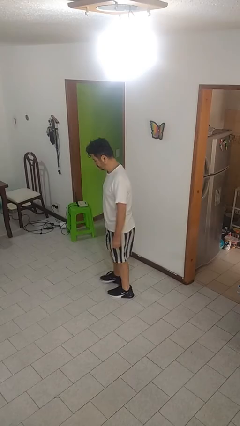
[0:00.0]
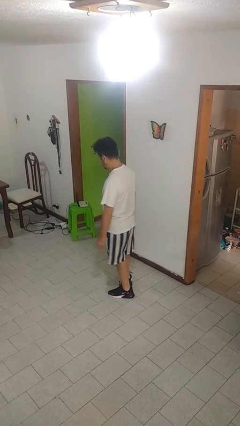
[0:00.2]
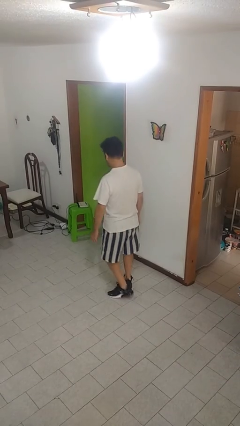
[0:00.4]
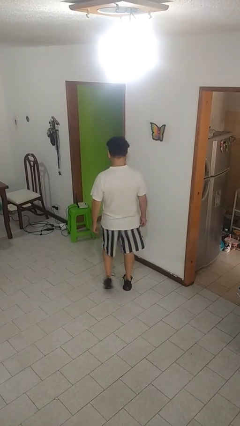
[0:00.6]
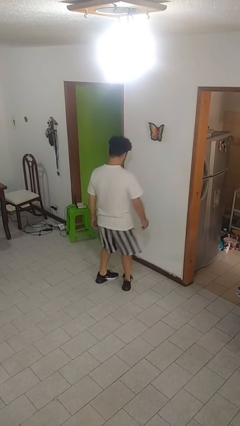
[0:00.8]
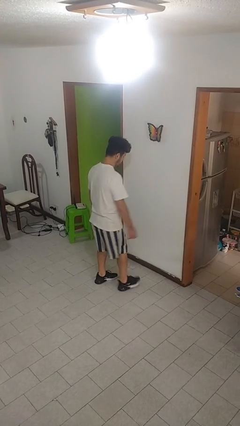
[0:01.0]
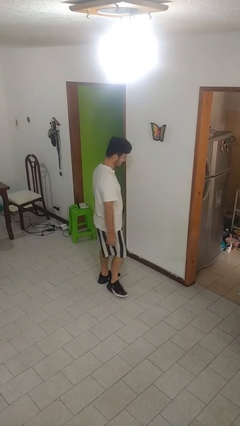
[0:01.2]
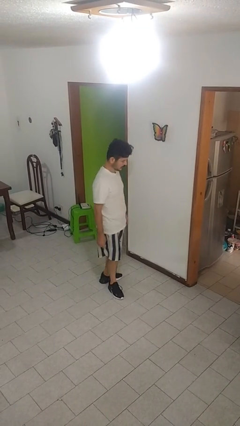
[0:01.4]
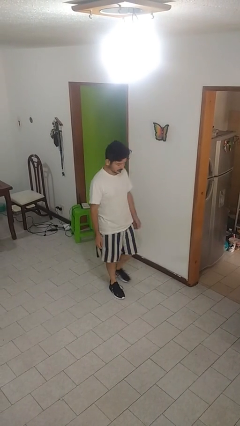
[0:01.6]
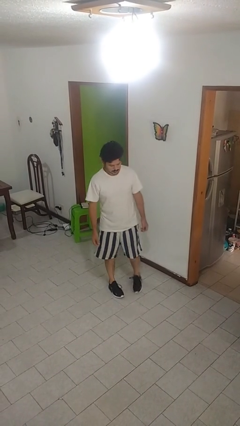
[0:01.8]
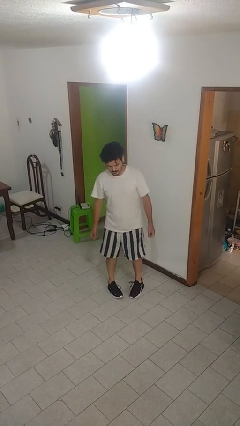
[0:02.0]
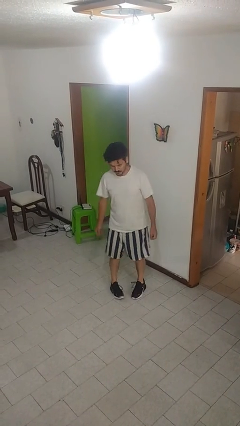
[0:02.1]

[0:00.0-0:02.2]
person twirls

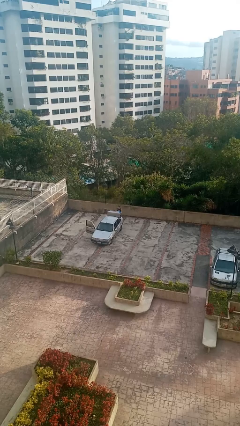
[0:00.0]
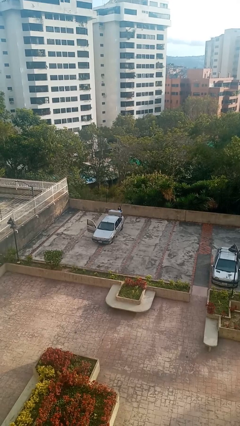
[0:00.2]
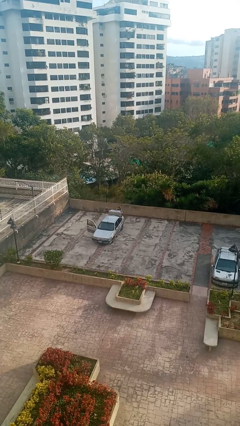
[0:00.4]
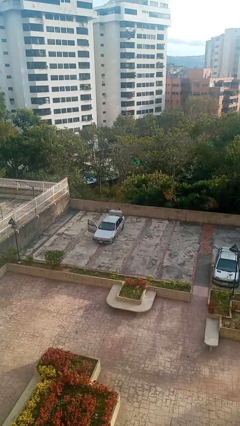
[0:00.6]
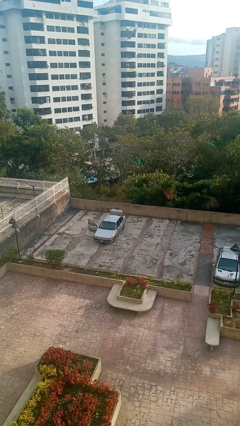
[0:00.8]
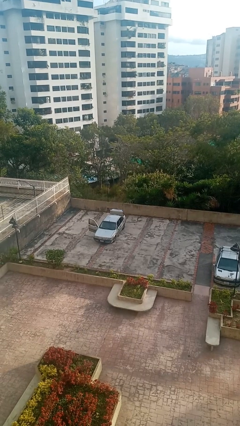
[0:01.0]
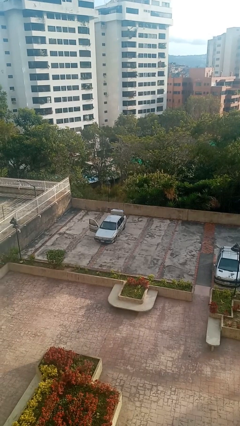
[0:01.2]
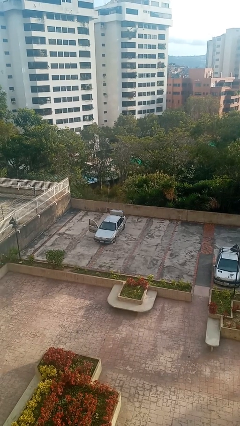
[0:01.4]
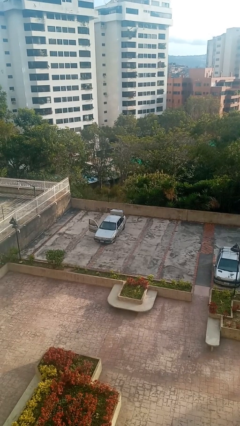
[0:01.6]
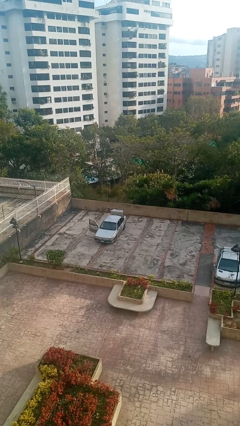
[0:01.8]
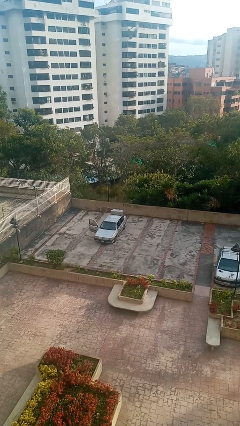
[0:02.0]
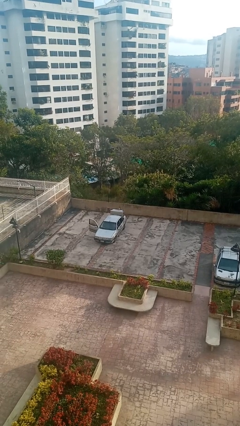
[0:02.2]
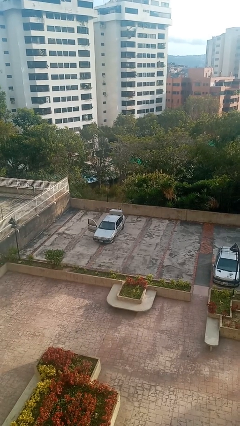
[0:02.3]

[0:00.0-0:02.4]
person loads car

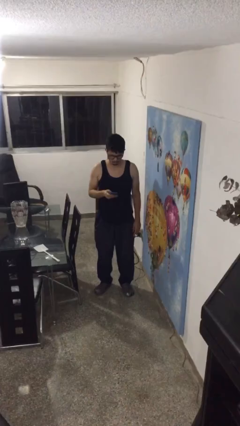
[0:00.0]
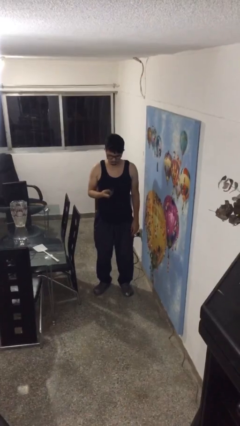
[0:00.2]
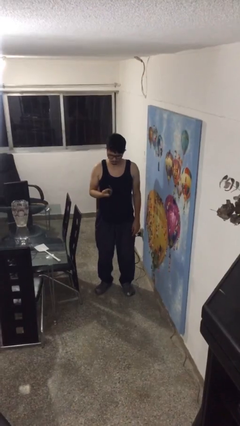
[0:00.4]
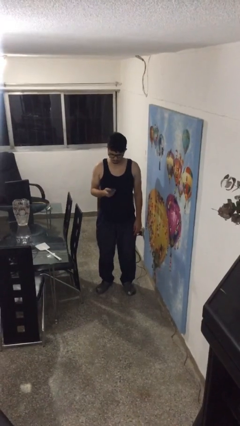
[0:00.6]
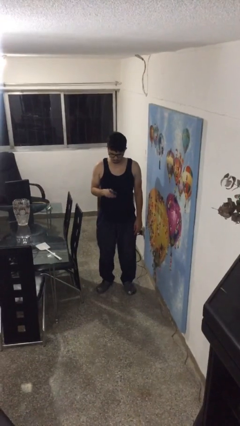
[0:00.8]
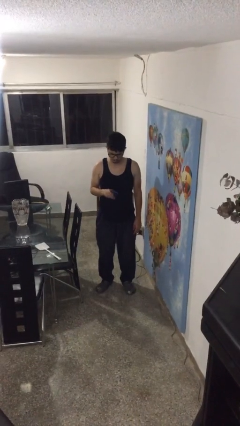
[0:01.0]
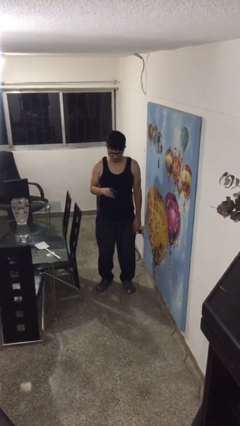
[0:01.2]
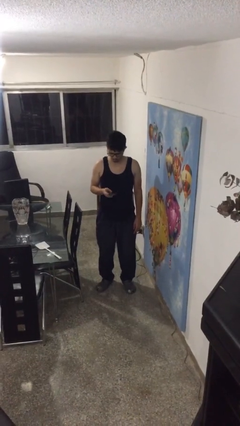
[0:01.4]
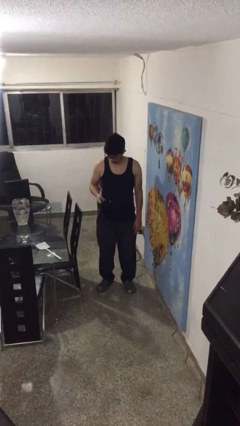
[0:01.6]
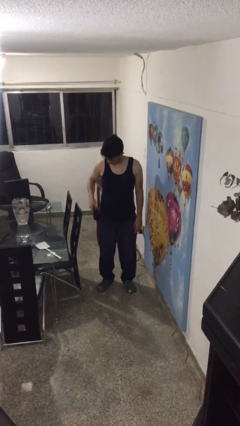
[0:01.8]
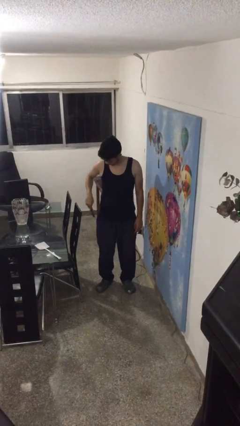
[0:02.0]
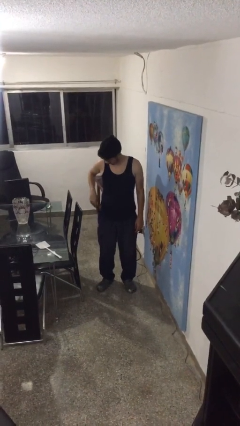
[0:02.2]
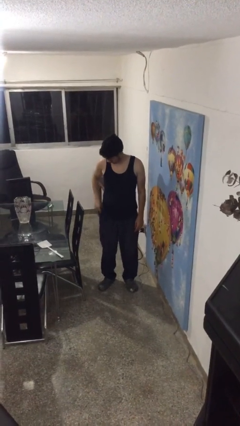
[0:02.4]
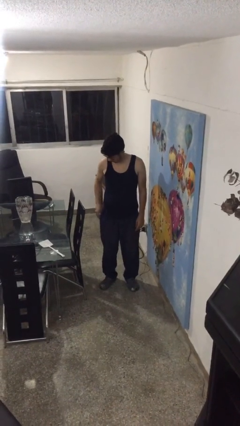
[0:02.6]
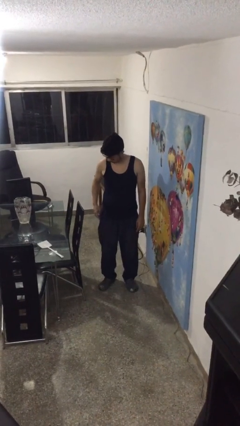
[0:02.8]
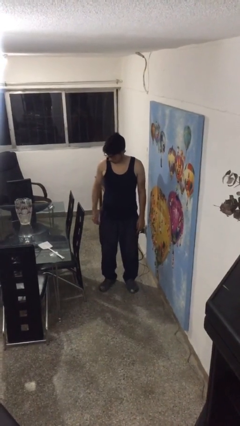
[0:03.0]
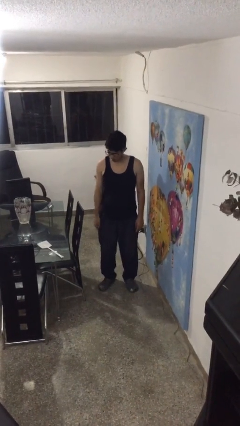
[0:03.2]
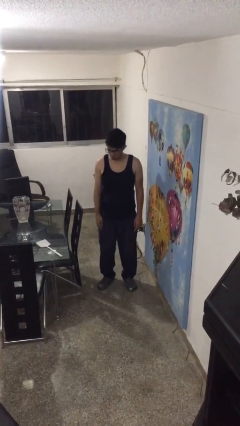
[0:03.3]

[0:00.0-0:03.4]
person puts phone into pocket

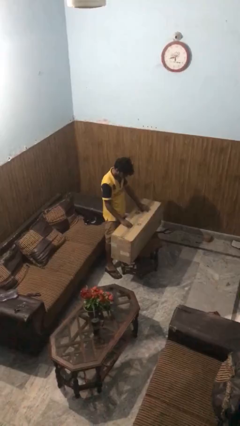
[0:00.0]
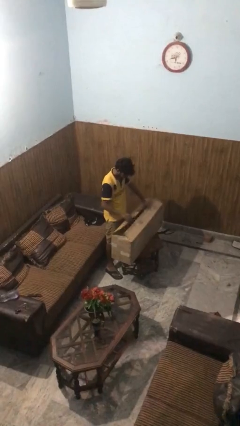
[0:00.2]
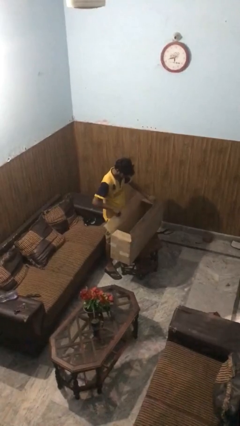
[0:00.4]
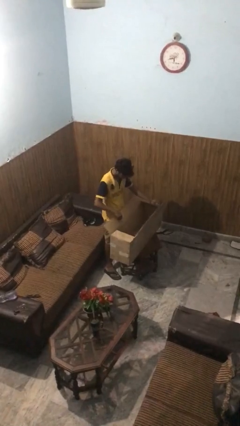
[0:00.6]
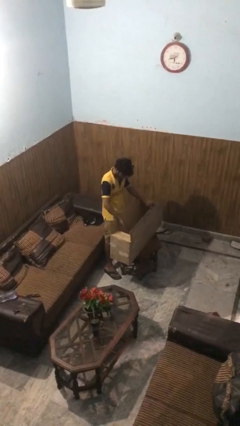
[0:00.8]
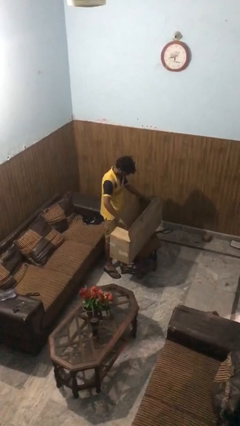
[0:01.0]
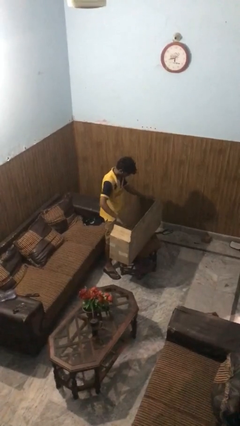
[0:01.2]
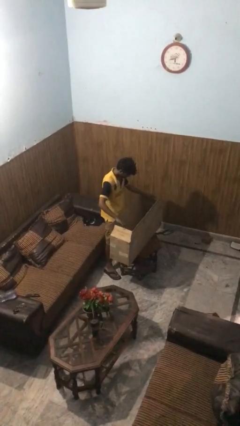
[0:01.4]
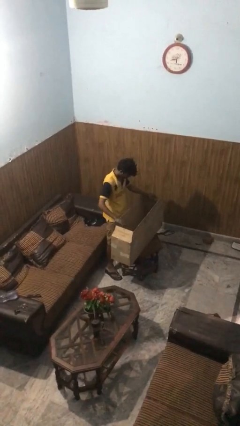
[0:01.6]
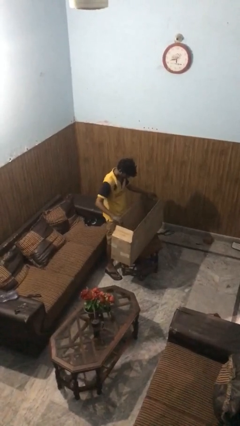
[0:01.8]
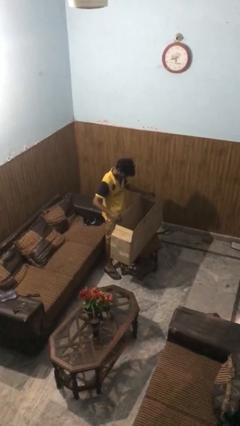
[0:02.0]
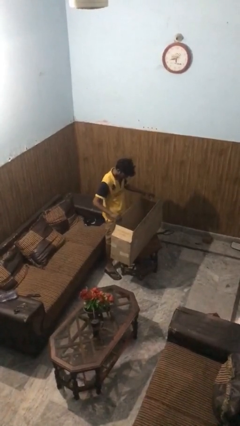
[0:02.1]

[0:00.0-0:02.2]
person opens box

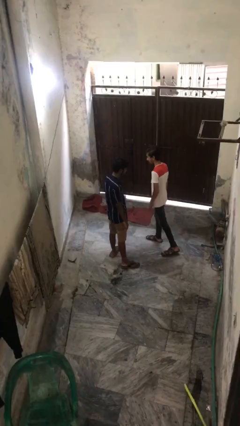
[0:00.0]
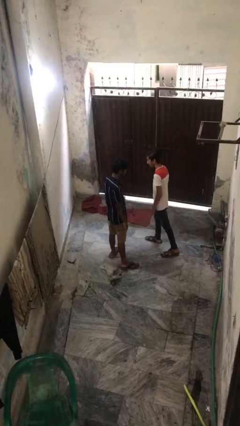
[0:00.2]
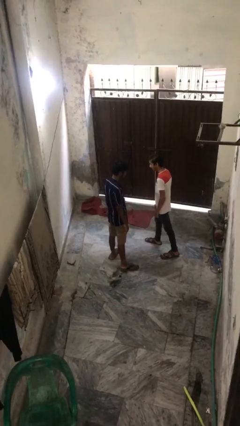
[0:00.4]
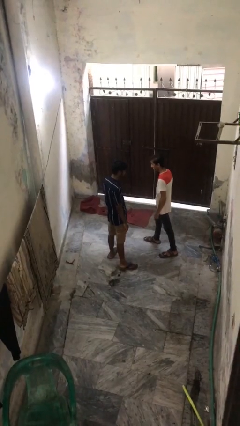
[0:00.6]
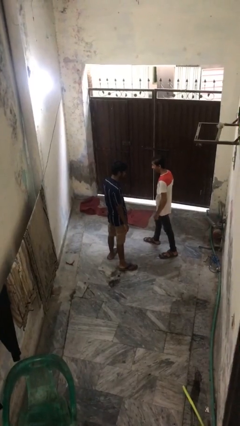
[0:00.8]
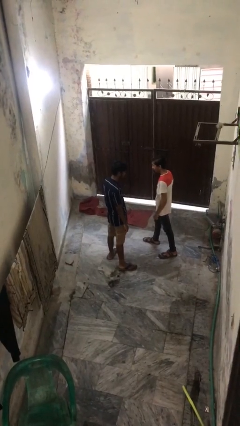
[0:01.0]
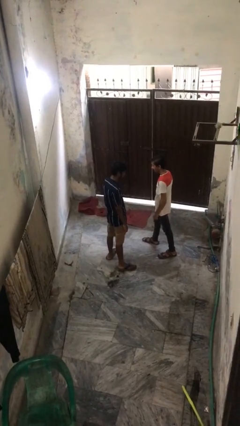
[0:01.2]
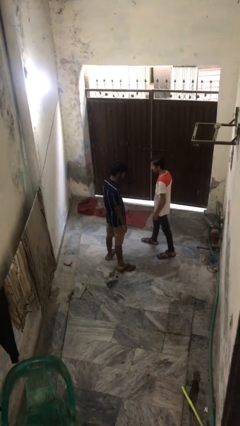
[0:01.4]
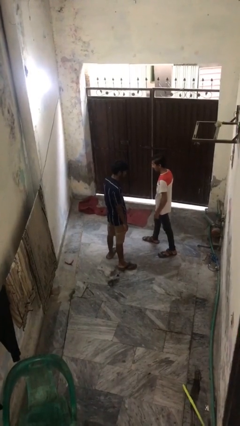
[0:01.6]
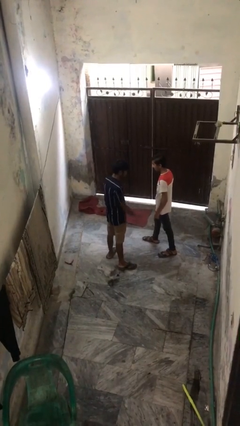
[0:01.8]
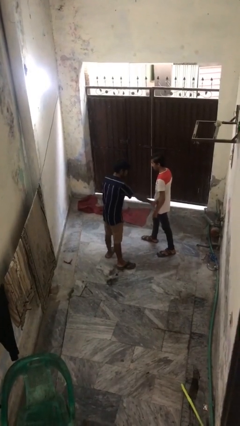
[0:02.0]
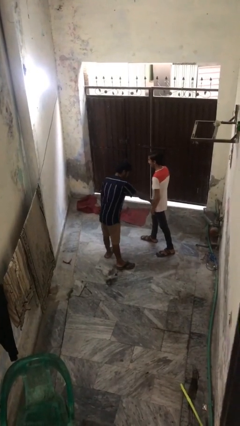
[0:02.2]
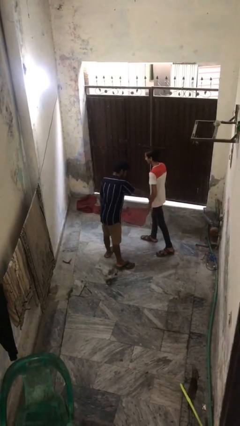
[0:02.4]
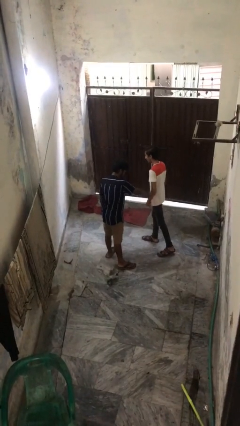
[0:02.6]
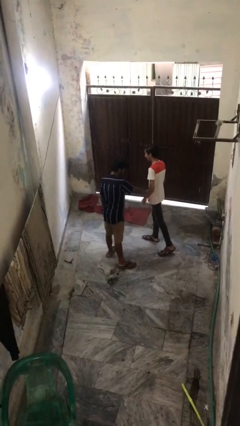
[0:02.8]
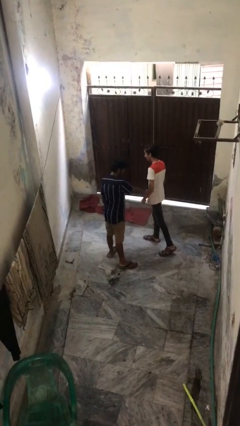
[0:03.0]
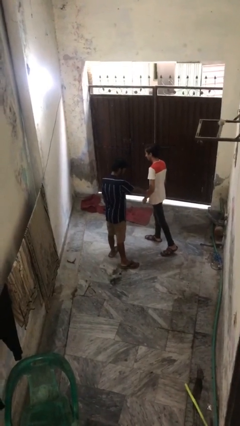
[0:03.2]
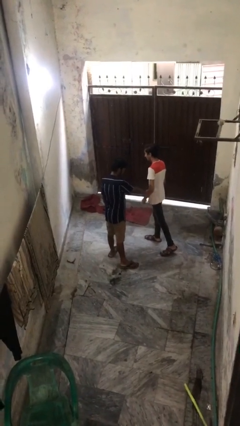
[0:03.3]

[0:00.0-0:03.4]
person grabs person by forearm

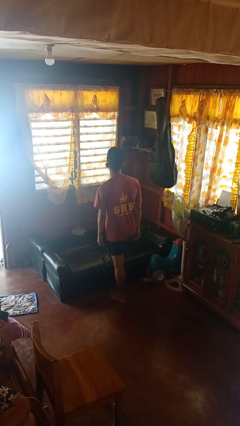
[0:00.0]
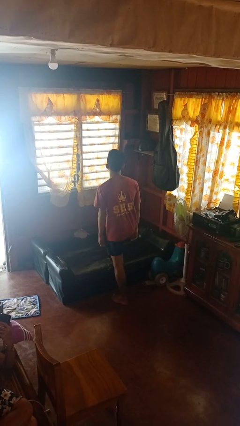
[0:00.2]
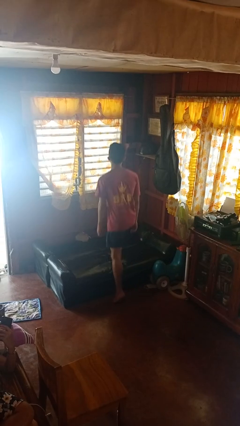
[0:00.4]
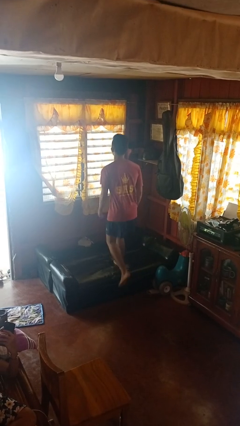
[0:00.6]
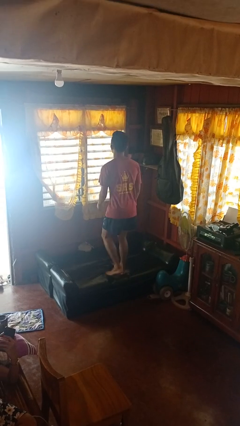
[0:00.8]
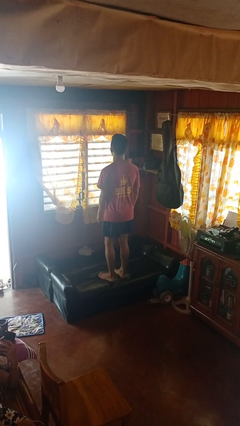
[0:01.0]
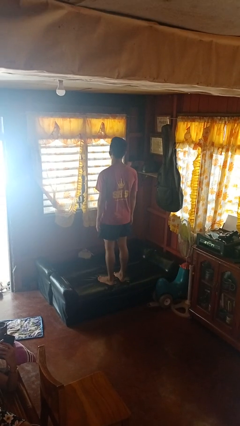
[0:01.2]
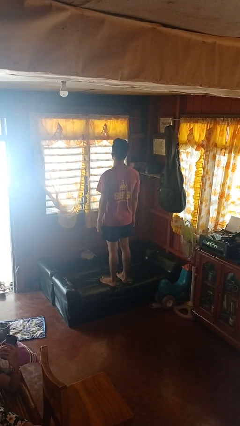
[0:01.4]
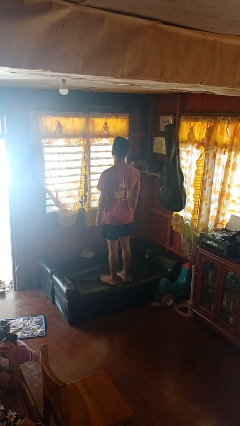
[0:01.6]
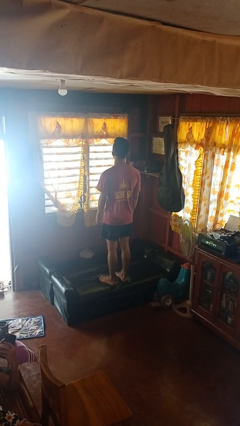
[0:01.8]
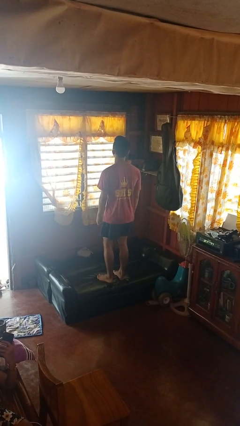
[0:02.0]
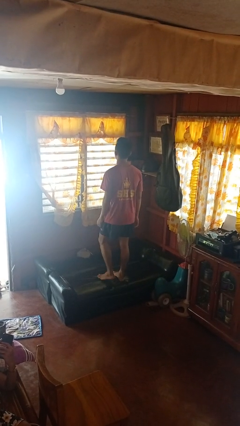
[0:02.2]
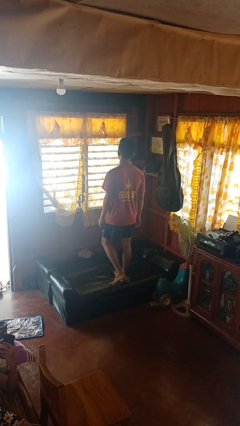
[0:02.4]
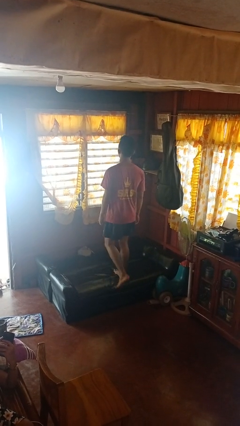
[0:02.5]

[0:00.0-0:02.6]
person climbs on couch

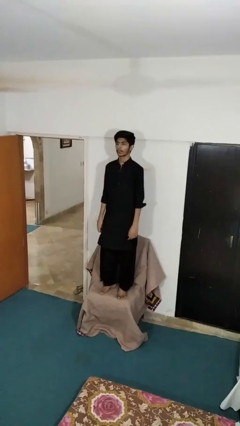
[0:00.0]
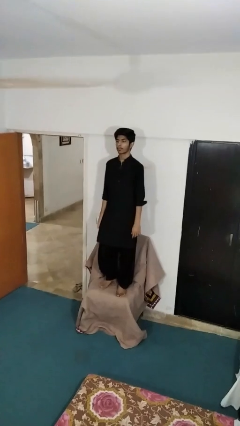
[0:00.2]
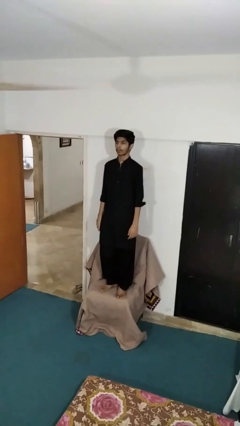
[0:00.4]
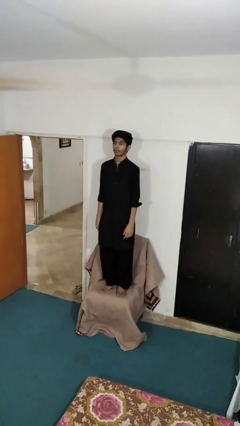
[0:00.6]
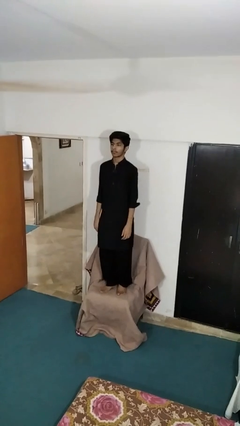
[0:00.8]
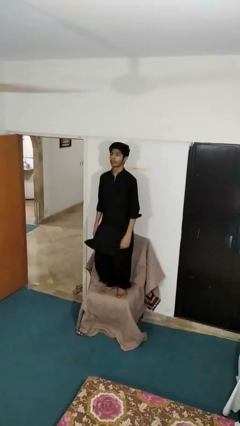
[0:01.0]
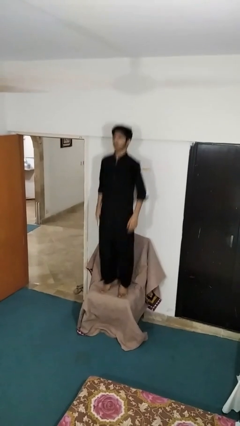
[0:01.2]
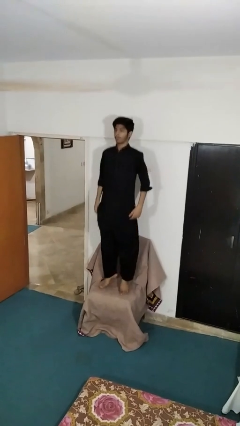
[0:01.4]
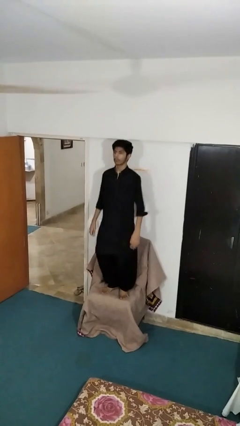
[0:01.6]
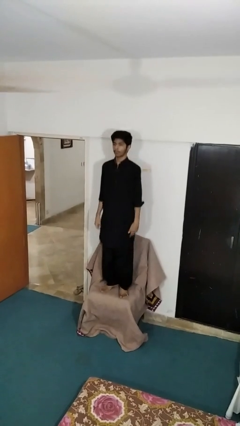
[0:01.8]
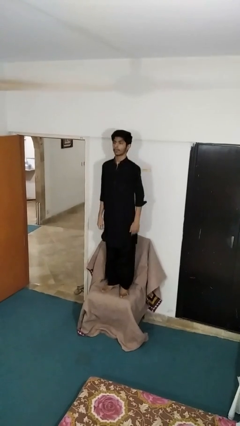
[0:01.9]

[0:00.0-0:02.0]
person jumps on couch
